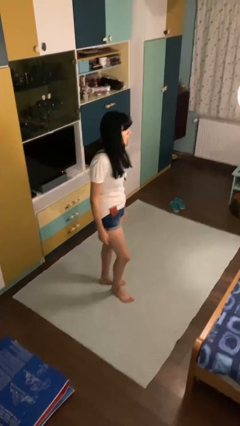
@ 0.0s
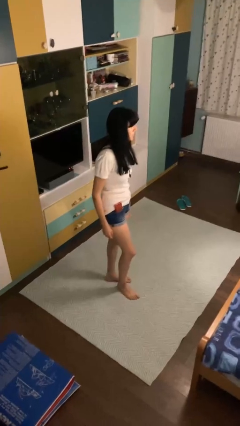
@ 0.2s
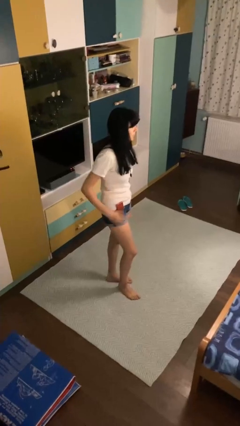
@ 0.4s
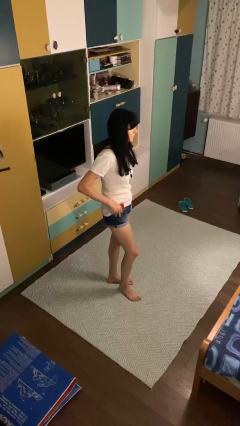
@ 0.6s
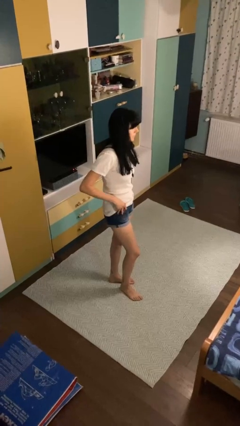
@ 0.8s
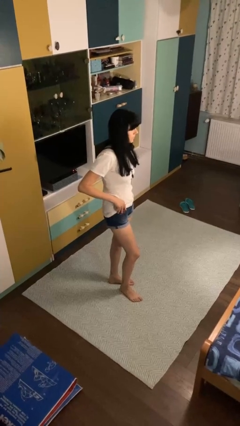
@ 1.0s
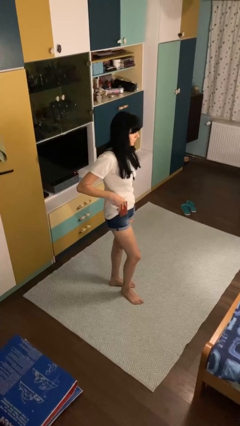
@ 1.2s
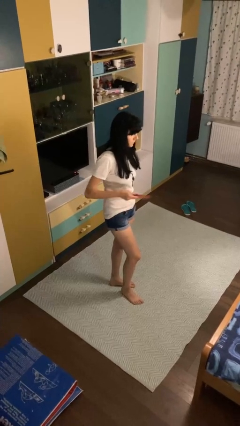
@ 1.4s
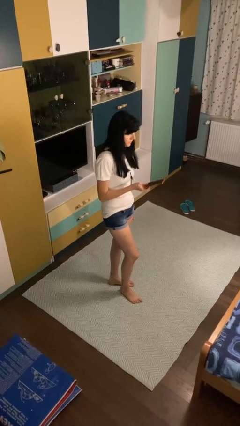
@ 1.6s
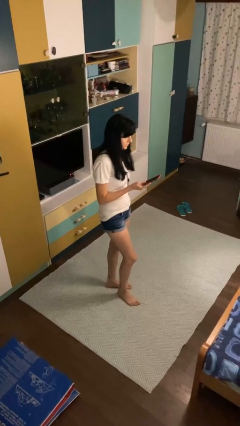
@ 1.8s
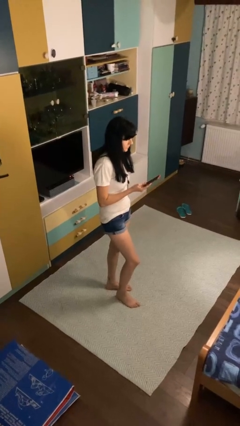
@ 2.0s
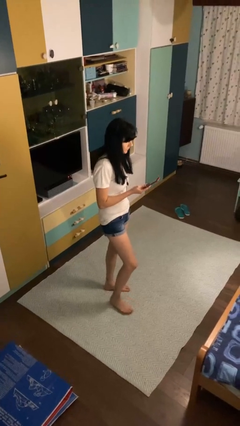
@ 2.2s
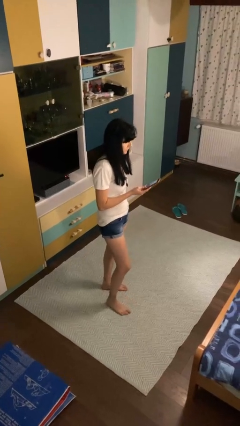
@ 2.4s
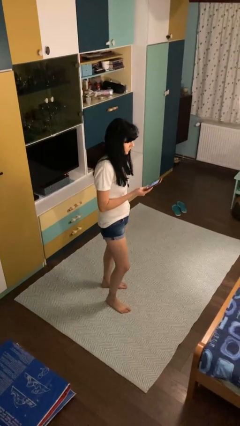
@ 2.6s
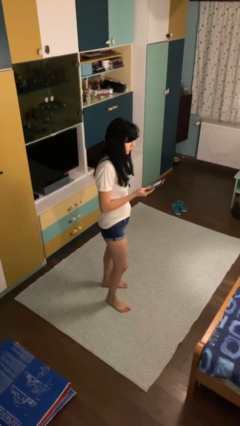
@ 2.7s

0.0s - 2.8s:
person takes phone from pocket

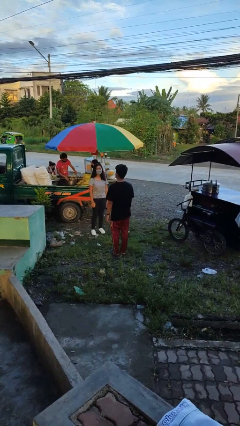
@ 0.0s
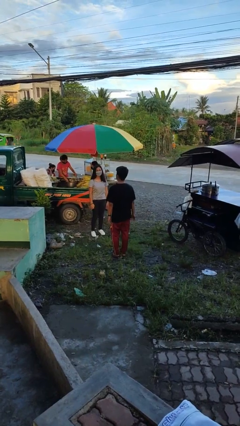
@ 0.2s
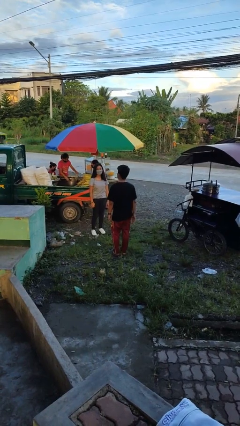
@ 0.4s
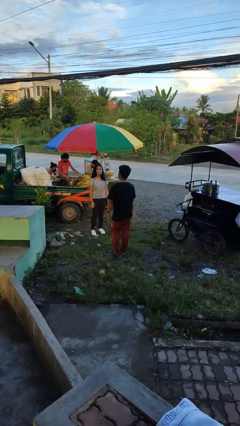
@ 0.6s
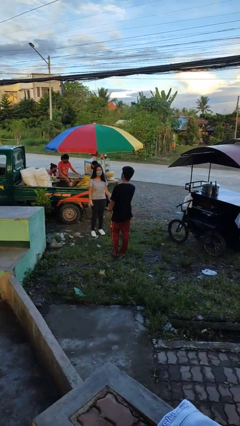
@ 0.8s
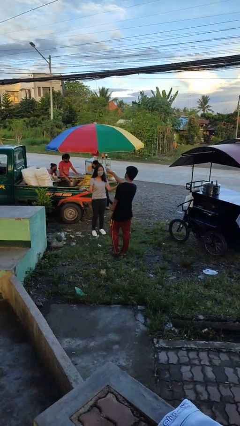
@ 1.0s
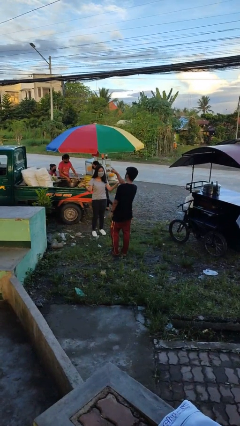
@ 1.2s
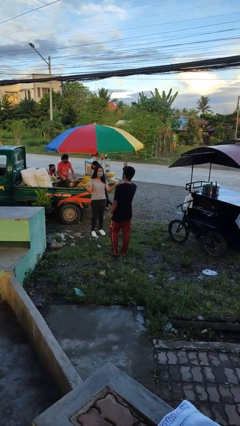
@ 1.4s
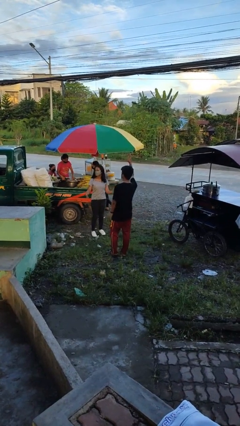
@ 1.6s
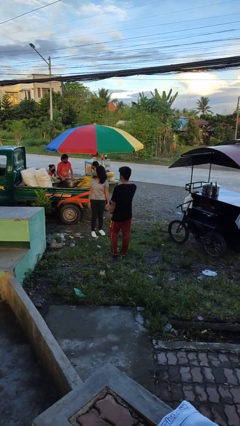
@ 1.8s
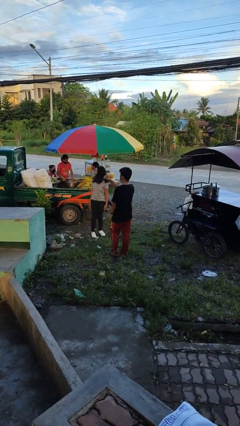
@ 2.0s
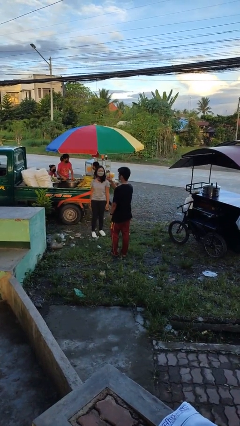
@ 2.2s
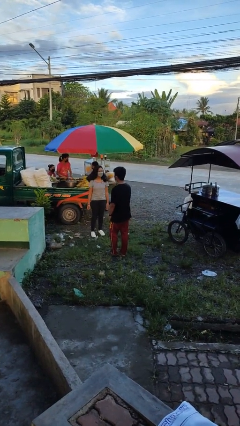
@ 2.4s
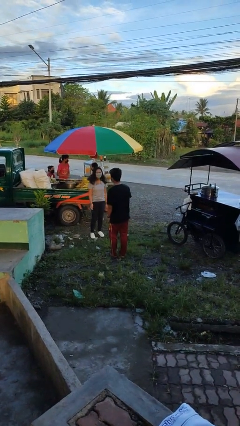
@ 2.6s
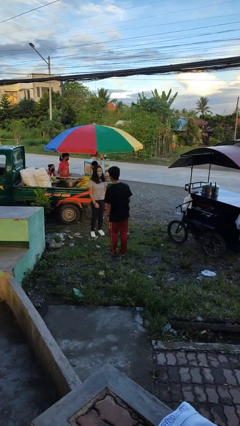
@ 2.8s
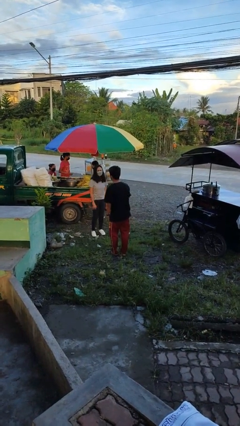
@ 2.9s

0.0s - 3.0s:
person talks to person

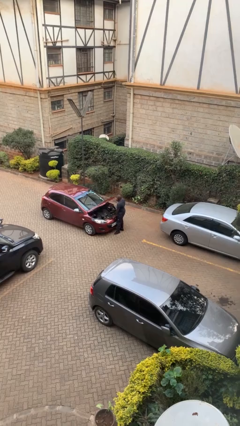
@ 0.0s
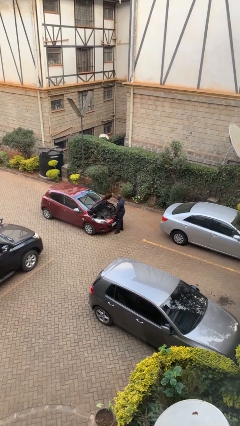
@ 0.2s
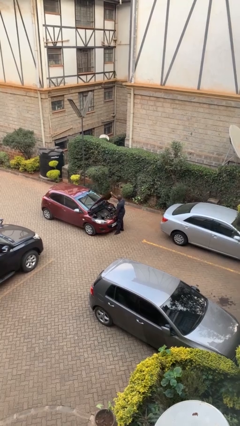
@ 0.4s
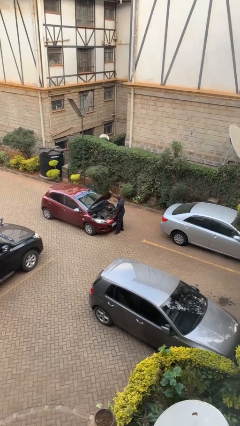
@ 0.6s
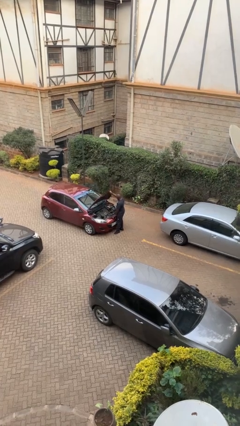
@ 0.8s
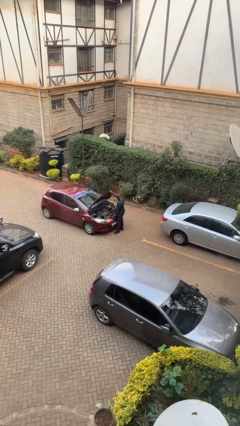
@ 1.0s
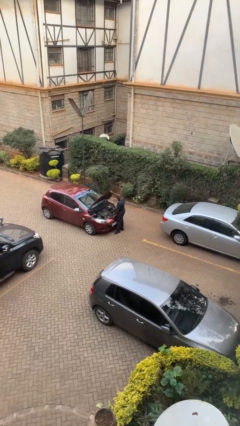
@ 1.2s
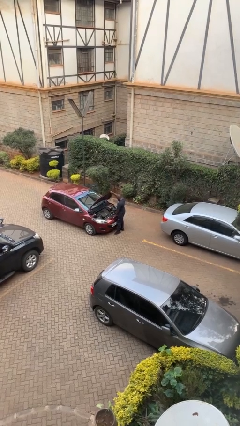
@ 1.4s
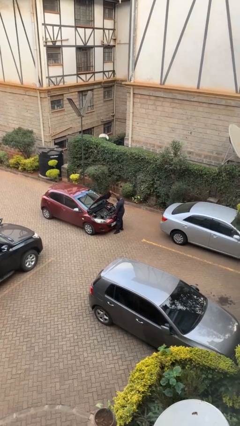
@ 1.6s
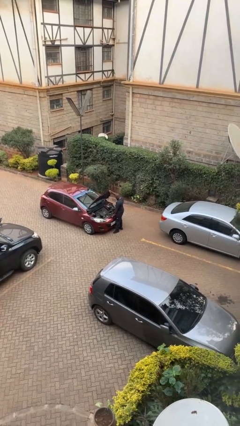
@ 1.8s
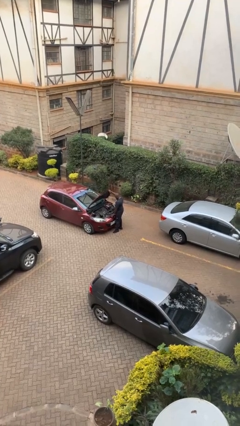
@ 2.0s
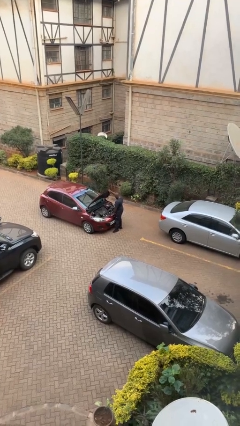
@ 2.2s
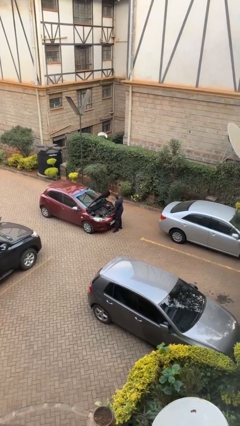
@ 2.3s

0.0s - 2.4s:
person opens car hood

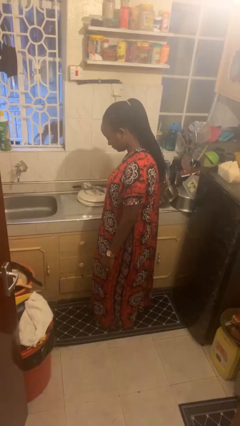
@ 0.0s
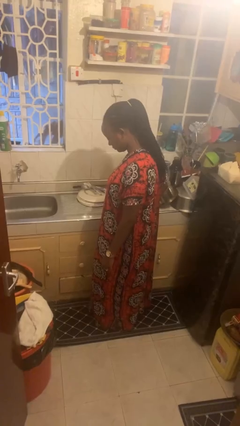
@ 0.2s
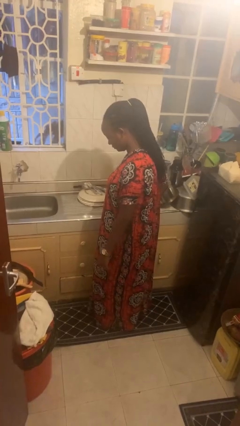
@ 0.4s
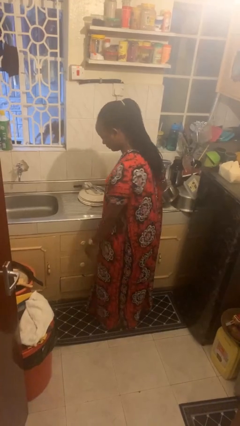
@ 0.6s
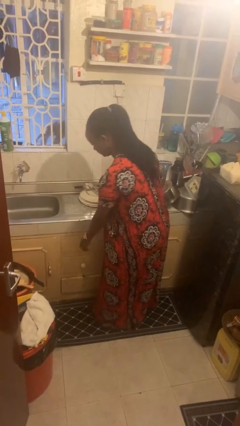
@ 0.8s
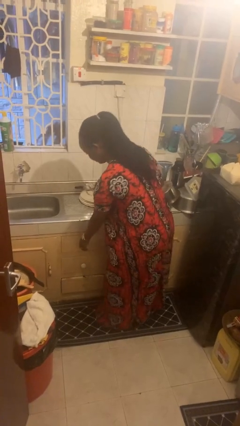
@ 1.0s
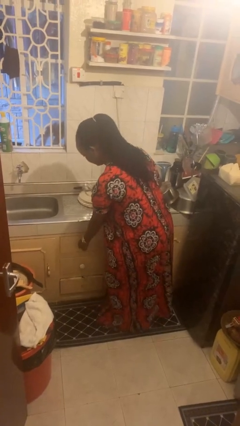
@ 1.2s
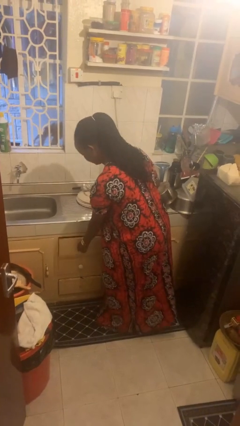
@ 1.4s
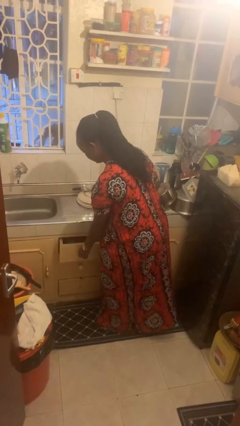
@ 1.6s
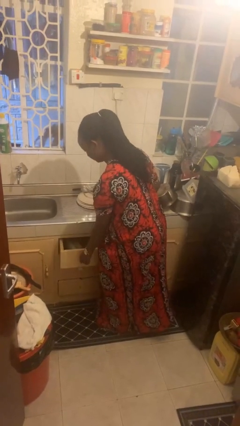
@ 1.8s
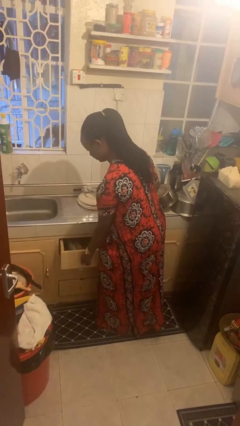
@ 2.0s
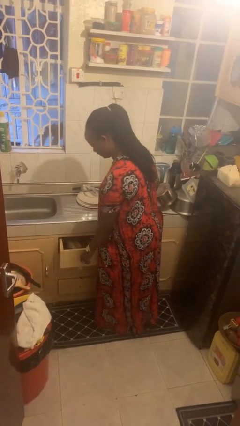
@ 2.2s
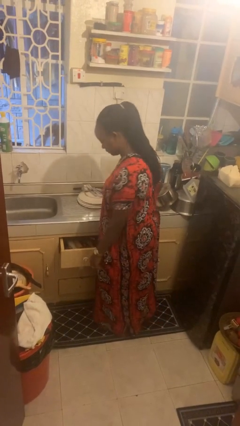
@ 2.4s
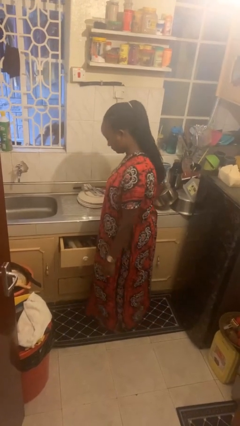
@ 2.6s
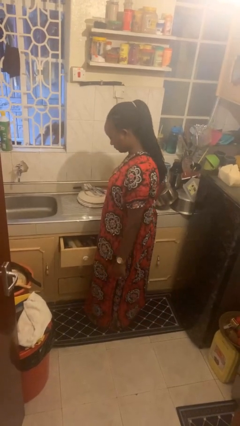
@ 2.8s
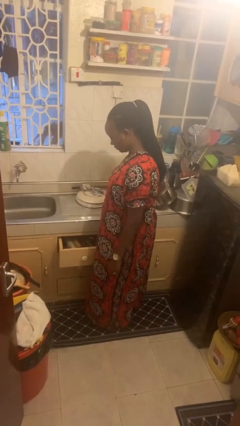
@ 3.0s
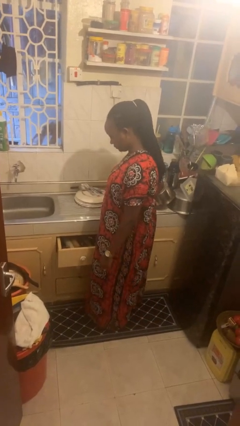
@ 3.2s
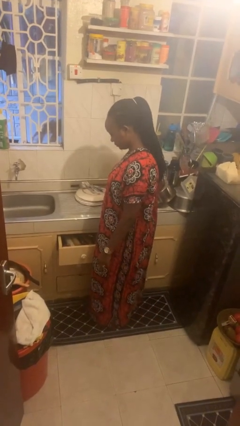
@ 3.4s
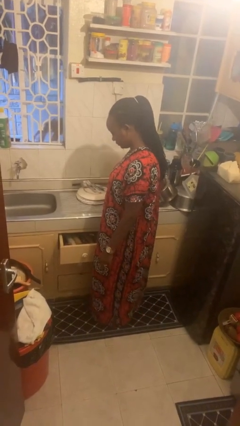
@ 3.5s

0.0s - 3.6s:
person opens kitchen drawer

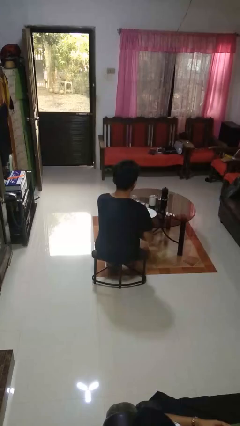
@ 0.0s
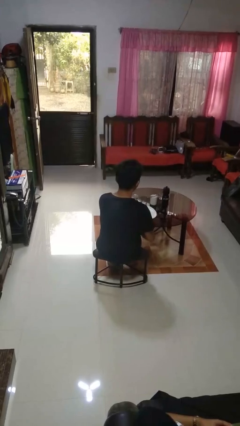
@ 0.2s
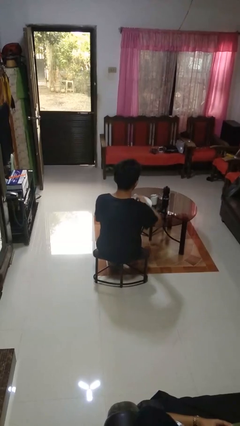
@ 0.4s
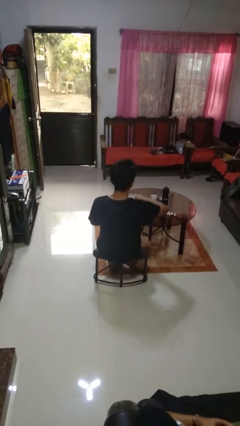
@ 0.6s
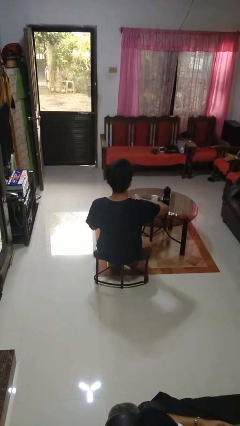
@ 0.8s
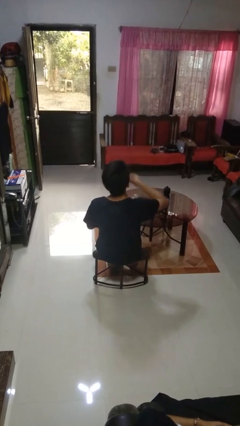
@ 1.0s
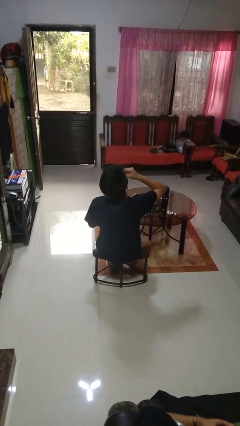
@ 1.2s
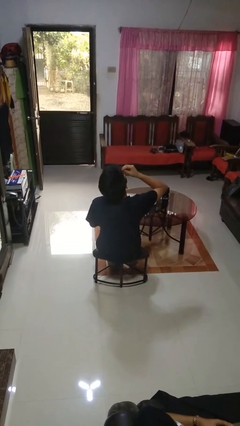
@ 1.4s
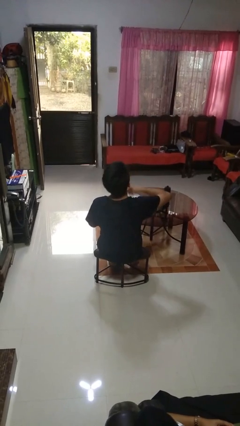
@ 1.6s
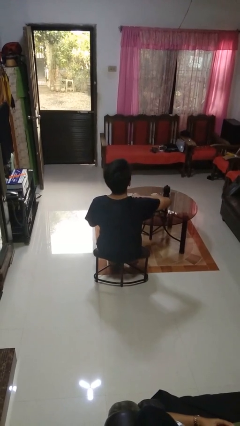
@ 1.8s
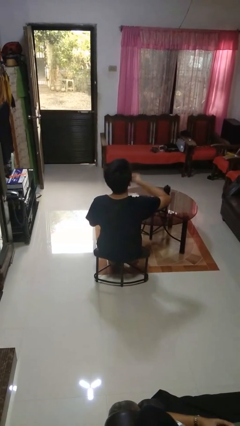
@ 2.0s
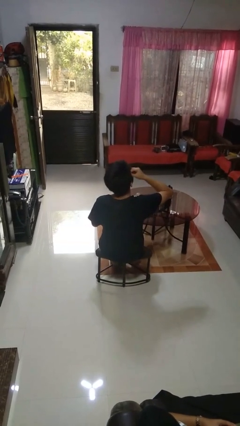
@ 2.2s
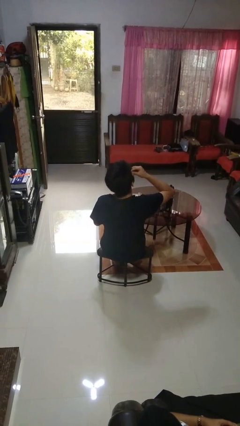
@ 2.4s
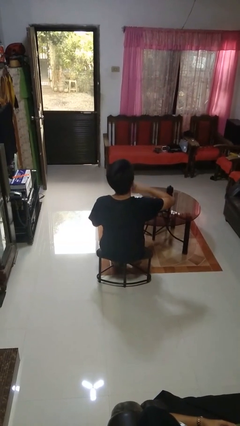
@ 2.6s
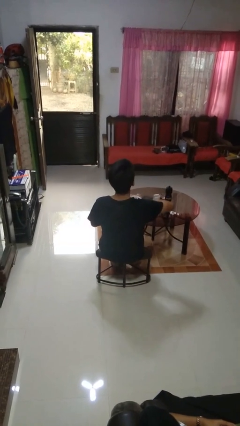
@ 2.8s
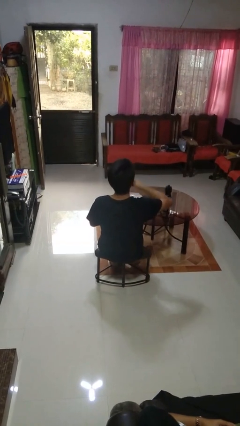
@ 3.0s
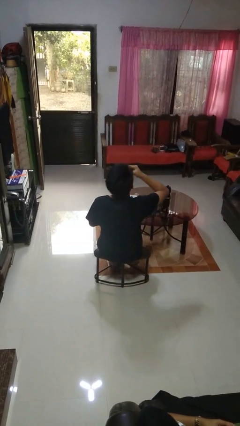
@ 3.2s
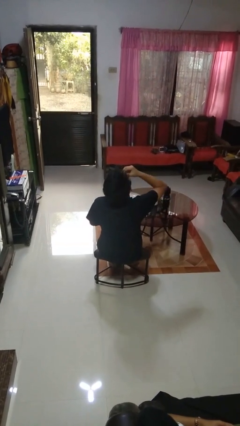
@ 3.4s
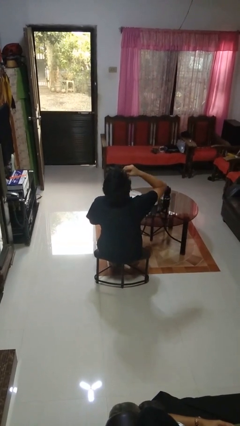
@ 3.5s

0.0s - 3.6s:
person eats with hands

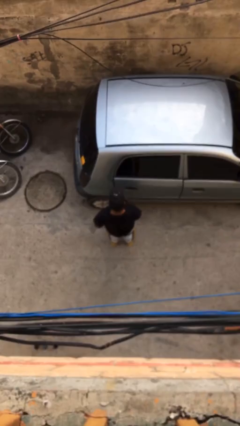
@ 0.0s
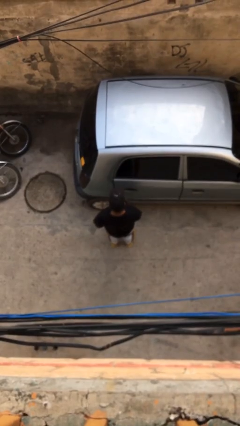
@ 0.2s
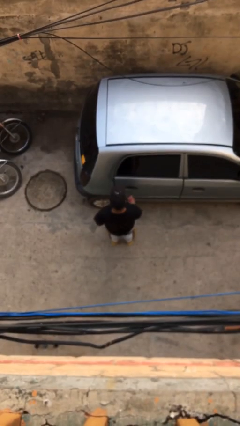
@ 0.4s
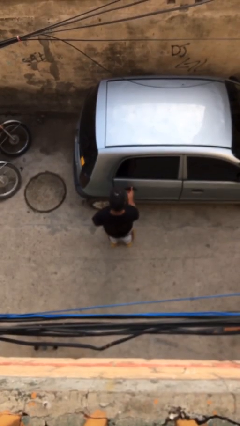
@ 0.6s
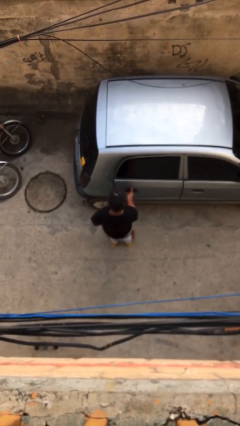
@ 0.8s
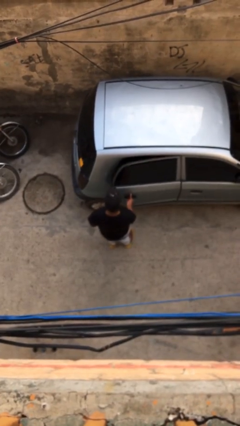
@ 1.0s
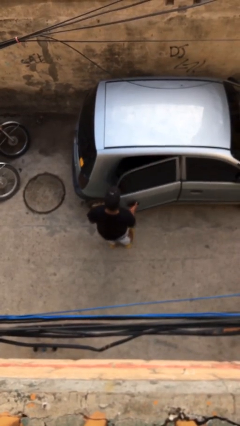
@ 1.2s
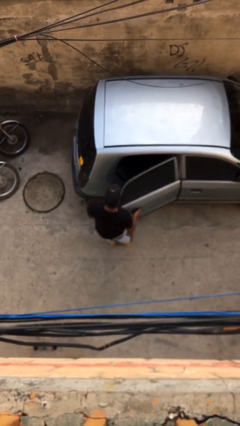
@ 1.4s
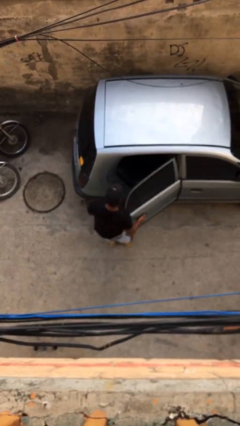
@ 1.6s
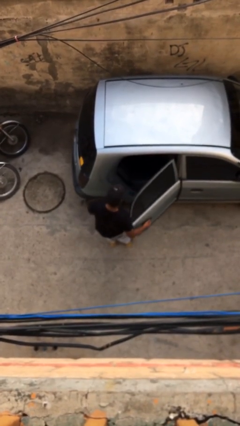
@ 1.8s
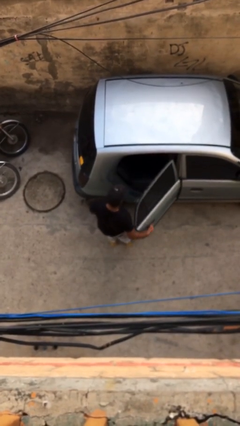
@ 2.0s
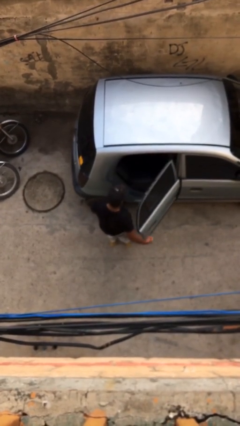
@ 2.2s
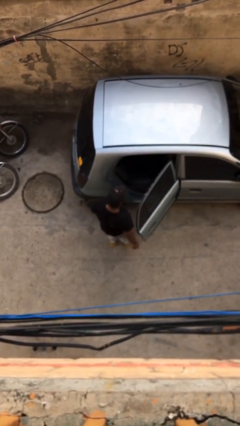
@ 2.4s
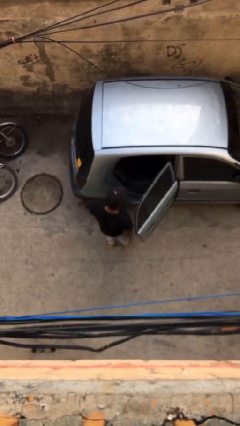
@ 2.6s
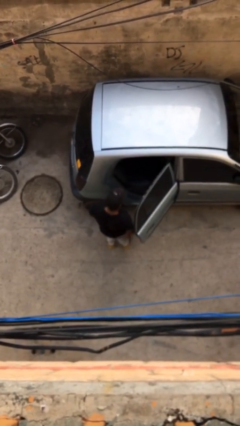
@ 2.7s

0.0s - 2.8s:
person opens car door
